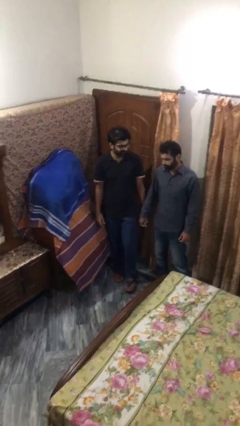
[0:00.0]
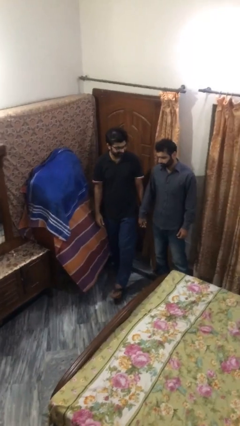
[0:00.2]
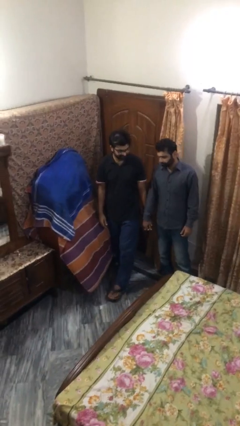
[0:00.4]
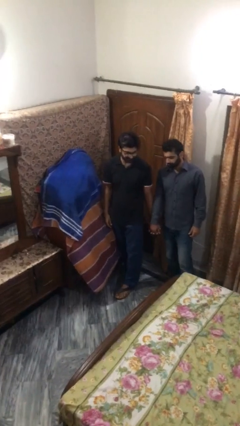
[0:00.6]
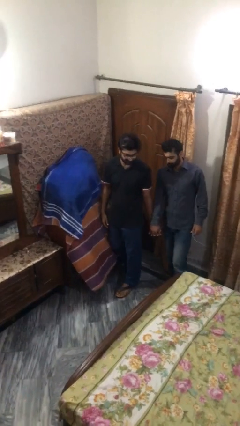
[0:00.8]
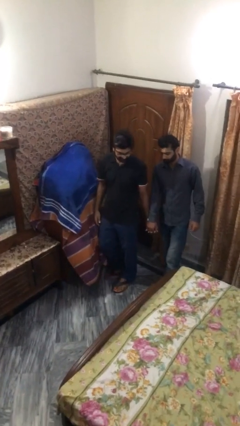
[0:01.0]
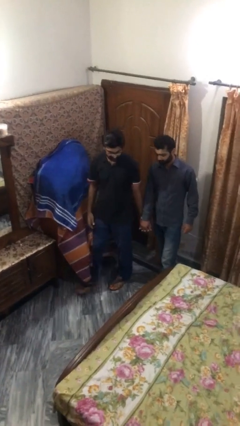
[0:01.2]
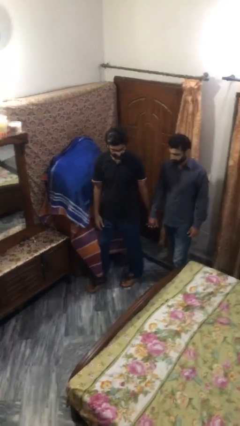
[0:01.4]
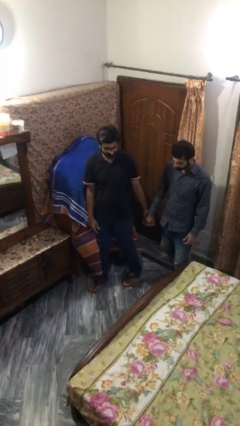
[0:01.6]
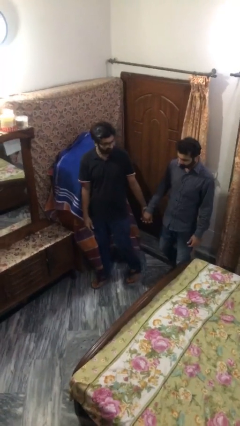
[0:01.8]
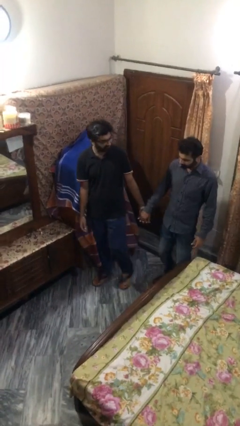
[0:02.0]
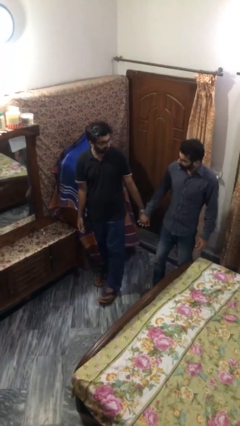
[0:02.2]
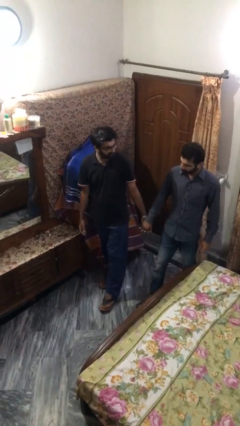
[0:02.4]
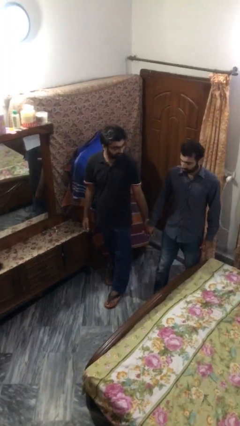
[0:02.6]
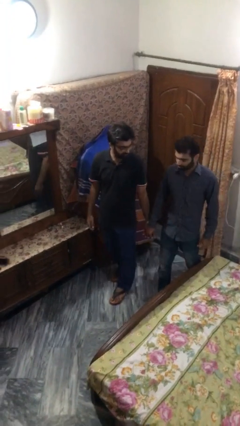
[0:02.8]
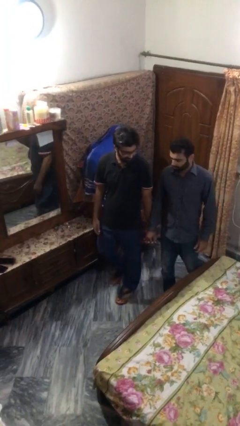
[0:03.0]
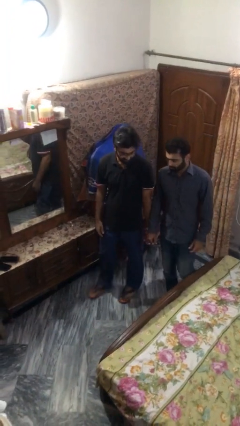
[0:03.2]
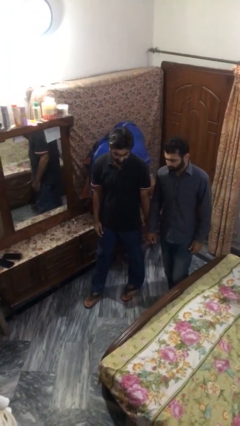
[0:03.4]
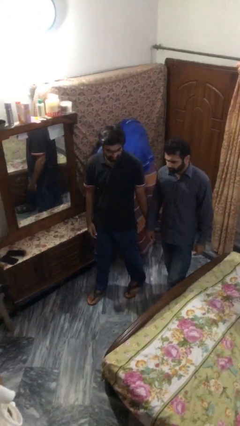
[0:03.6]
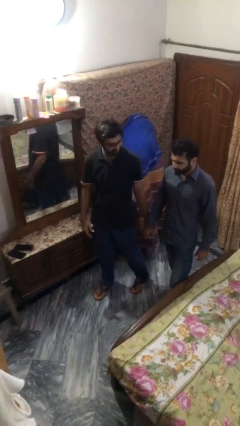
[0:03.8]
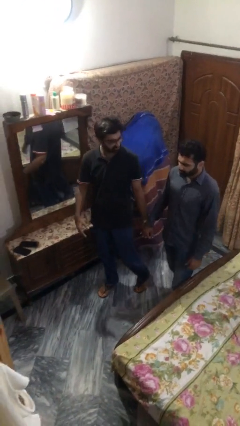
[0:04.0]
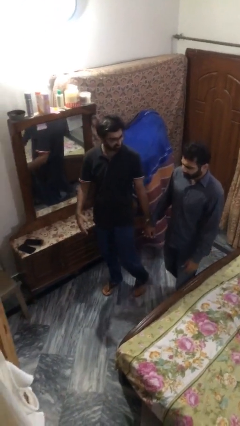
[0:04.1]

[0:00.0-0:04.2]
person holds hand

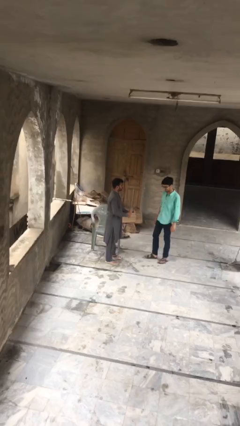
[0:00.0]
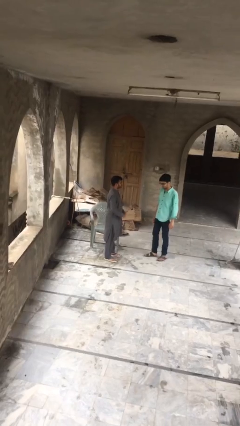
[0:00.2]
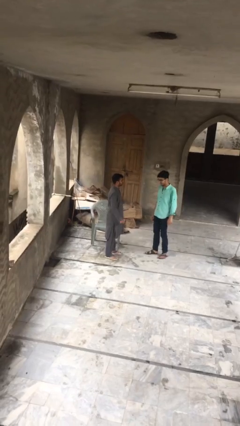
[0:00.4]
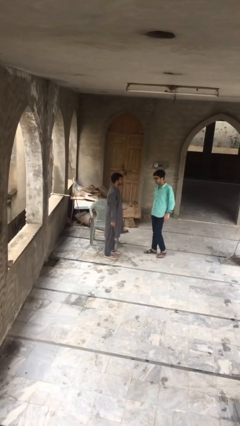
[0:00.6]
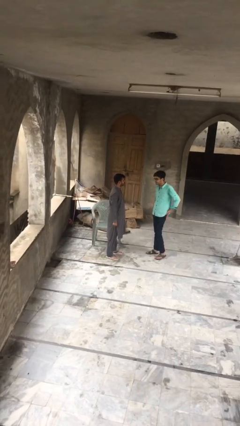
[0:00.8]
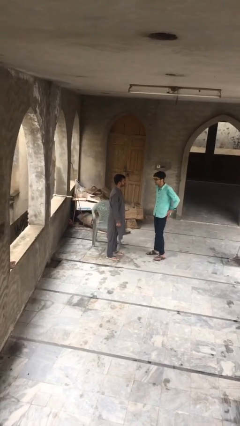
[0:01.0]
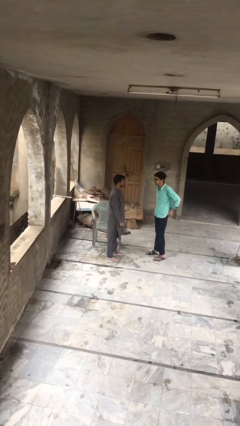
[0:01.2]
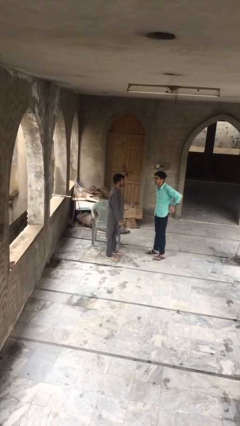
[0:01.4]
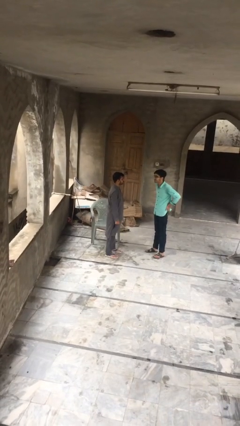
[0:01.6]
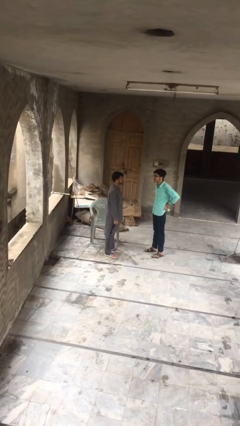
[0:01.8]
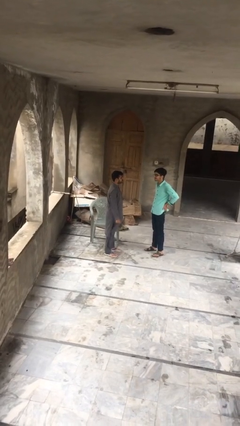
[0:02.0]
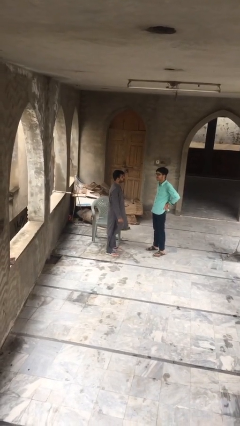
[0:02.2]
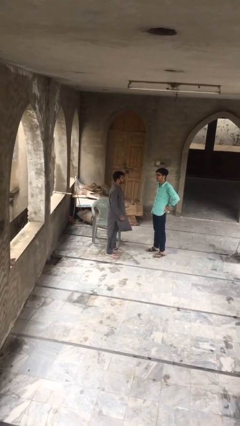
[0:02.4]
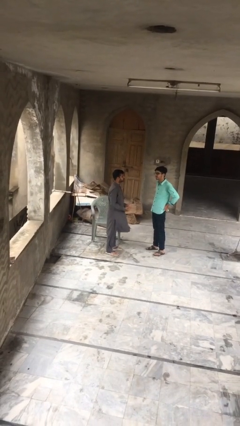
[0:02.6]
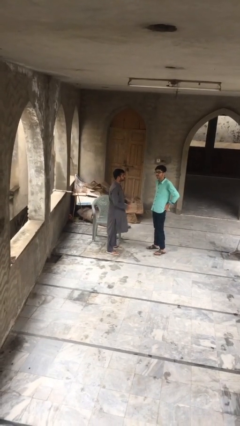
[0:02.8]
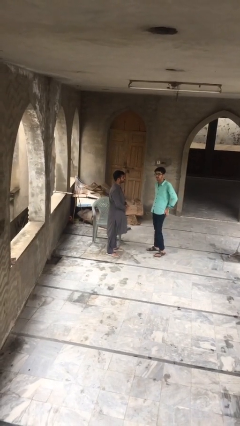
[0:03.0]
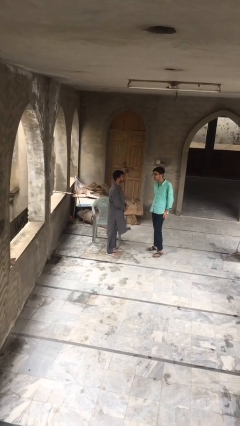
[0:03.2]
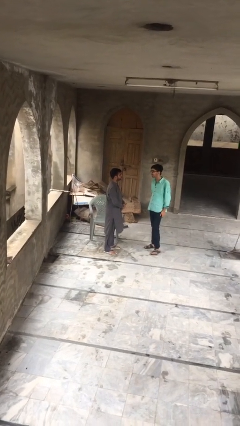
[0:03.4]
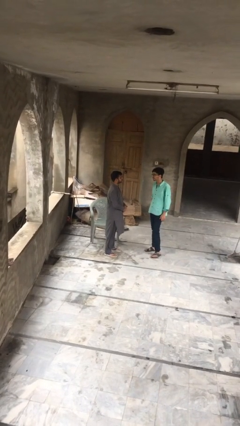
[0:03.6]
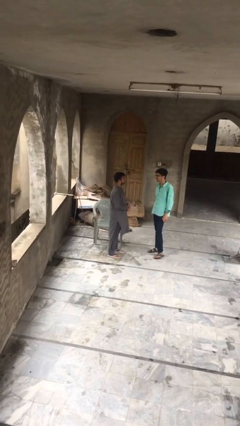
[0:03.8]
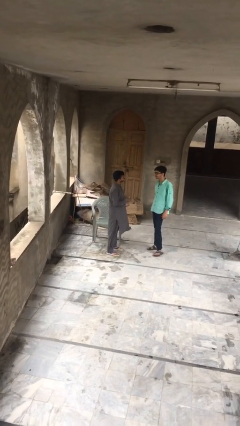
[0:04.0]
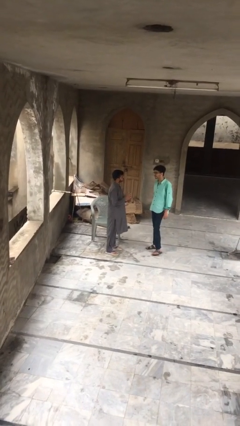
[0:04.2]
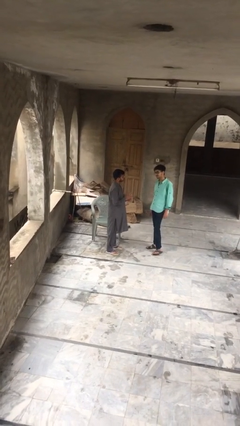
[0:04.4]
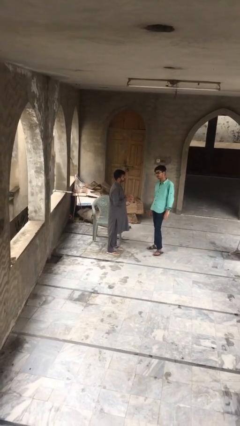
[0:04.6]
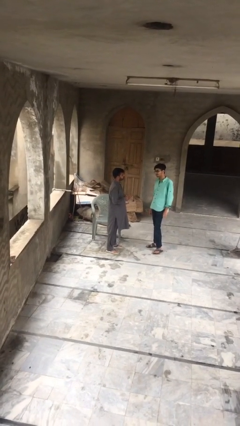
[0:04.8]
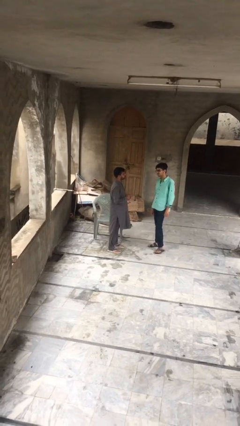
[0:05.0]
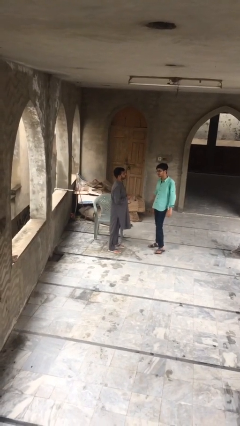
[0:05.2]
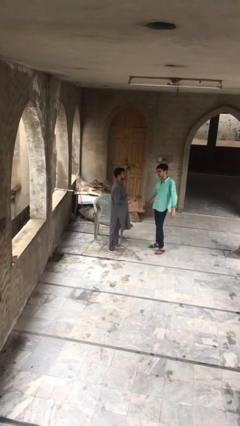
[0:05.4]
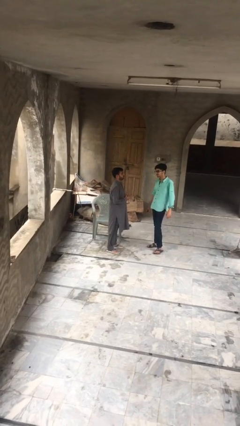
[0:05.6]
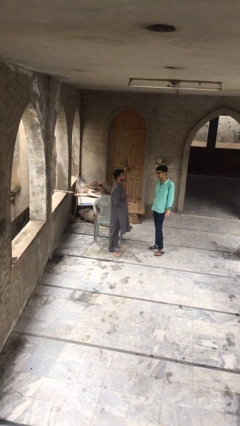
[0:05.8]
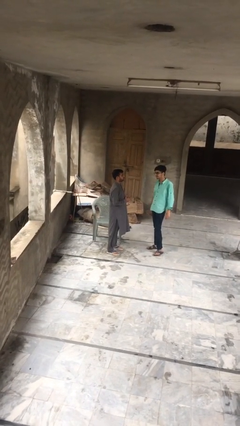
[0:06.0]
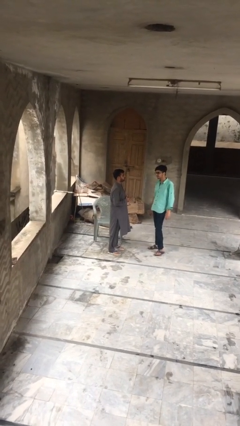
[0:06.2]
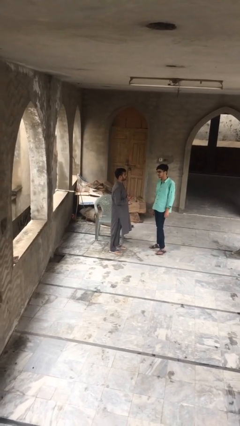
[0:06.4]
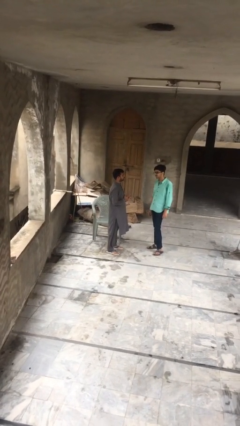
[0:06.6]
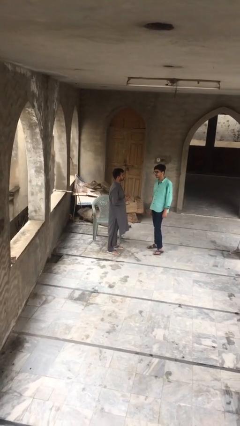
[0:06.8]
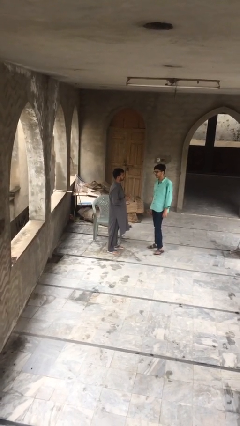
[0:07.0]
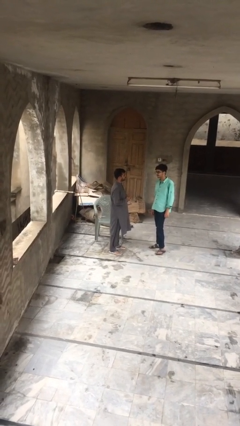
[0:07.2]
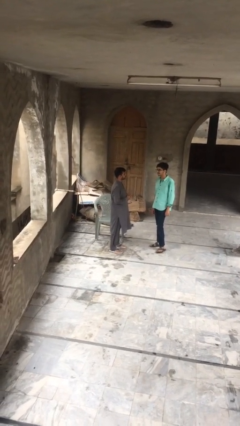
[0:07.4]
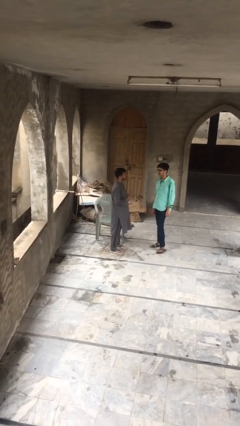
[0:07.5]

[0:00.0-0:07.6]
person talks to person

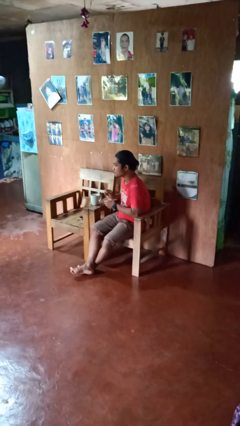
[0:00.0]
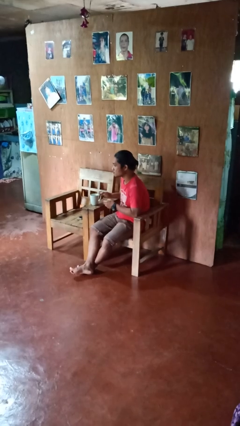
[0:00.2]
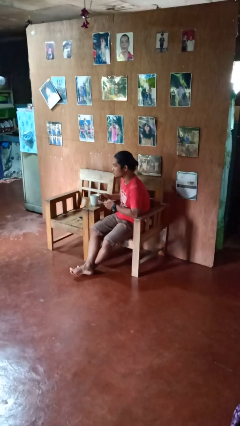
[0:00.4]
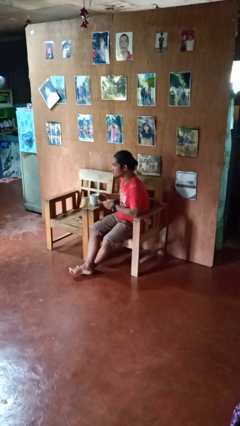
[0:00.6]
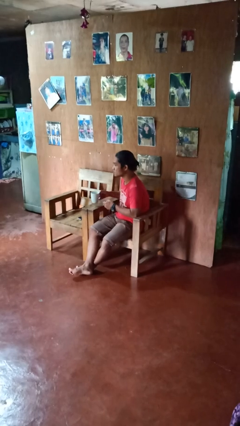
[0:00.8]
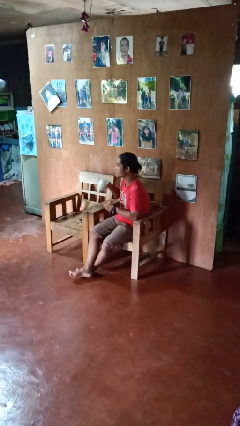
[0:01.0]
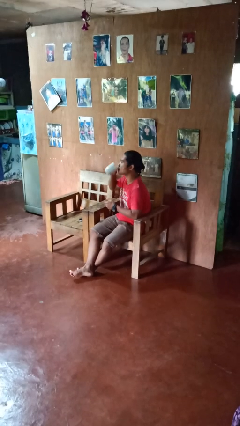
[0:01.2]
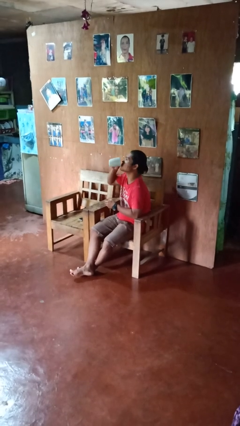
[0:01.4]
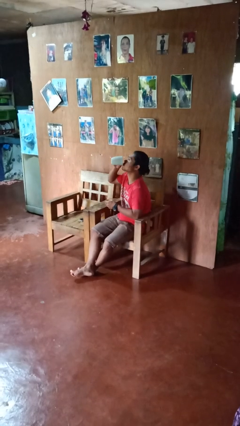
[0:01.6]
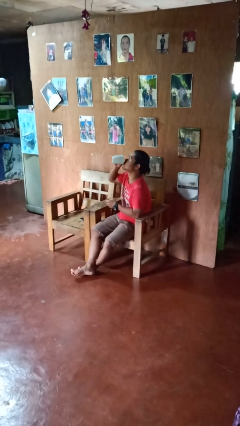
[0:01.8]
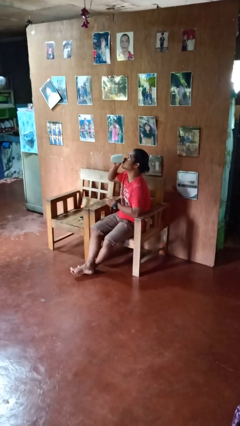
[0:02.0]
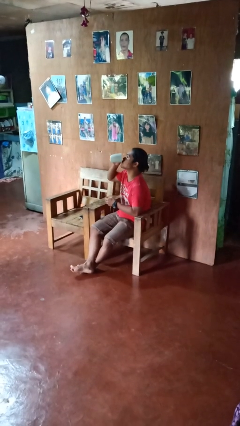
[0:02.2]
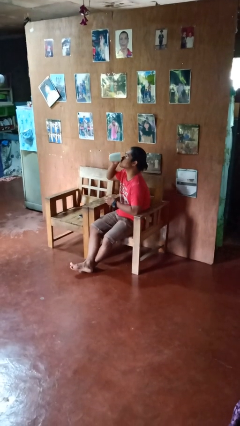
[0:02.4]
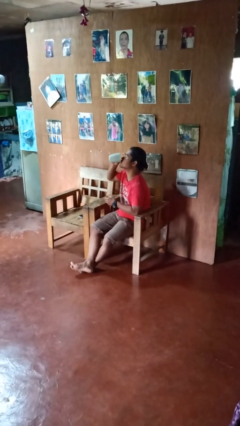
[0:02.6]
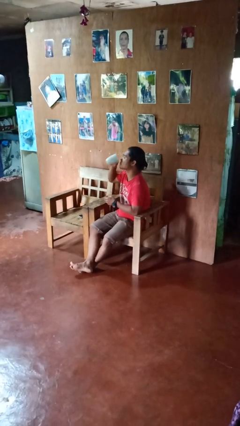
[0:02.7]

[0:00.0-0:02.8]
person drinks from cup

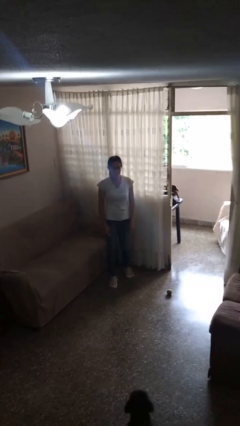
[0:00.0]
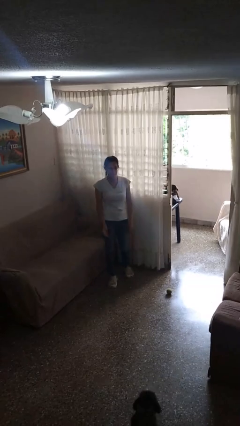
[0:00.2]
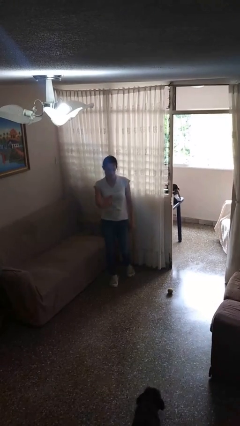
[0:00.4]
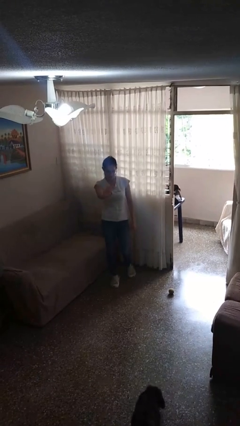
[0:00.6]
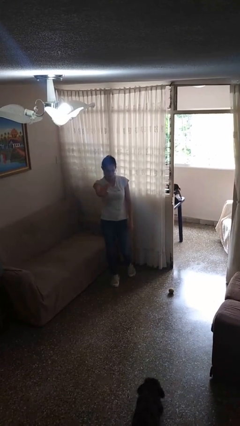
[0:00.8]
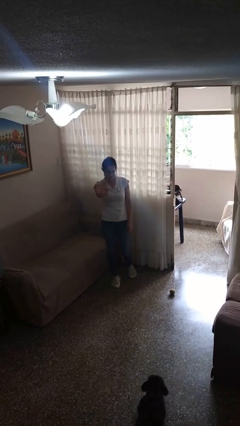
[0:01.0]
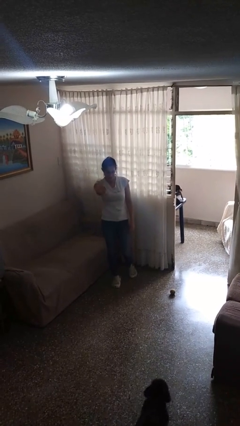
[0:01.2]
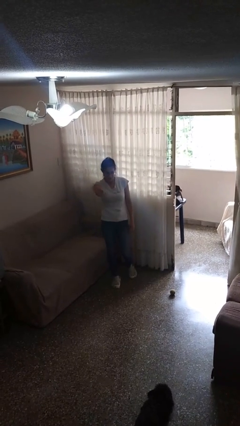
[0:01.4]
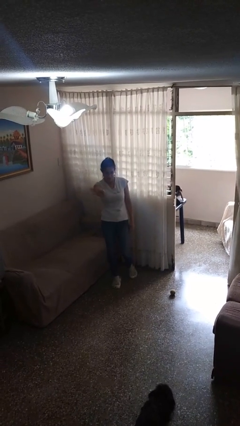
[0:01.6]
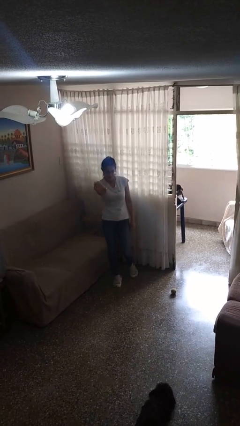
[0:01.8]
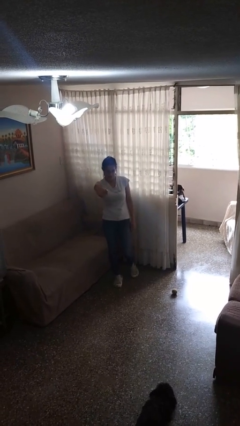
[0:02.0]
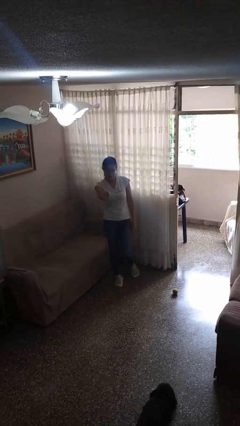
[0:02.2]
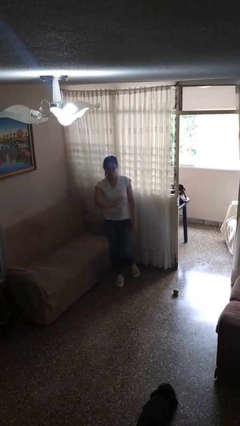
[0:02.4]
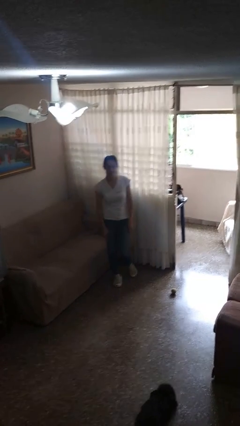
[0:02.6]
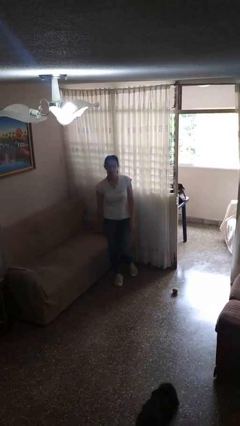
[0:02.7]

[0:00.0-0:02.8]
person waves at person

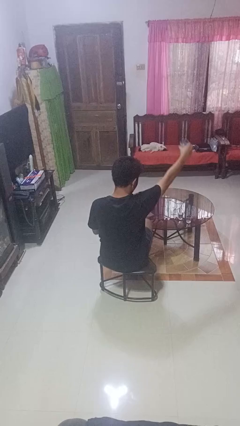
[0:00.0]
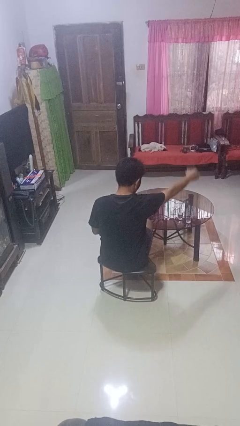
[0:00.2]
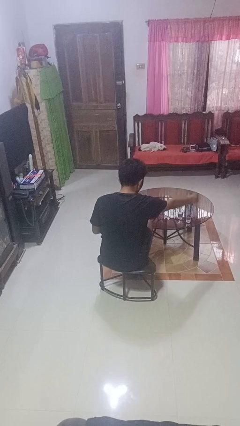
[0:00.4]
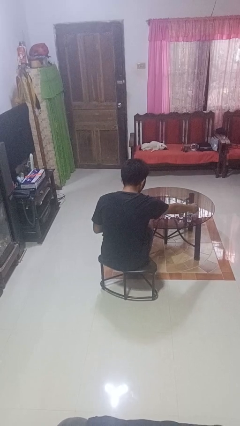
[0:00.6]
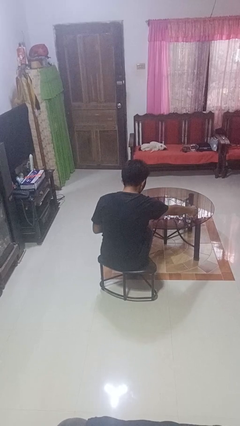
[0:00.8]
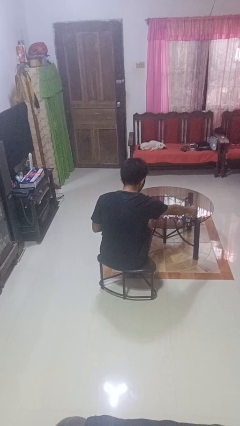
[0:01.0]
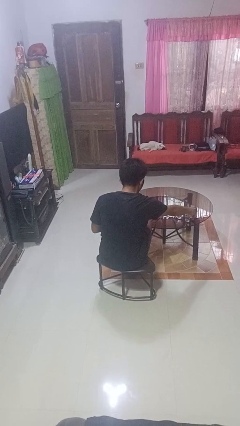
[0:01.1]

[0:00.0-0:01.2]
person puts down object on table
